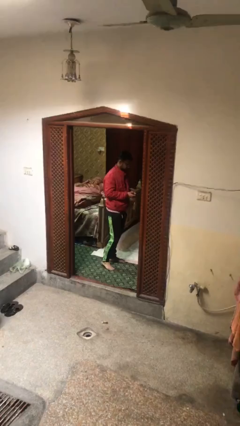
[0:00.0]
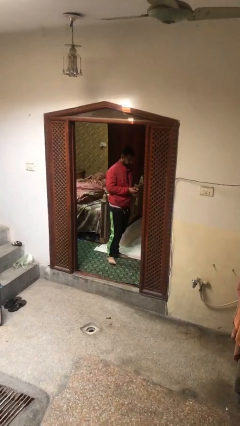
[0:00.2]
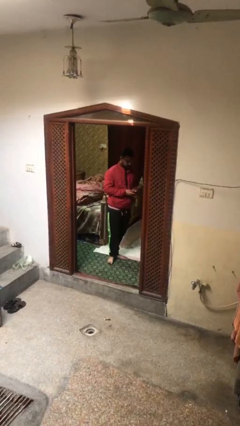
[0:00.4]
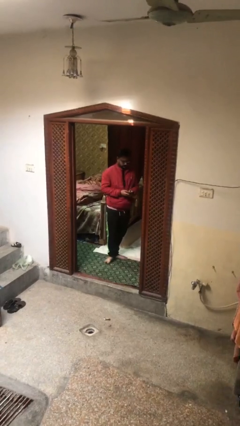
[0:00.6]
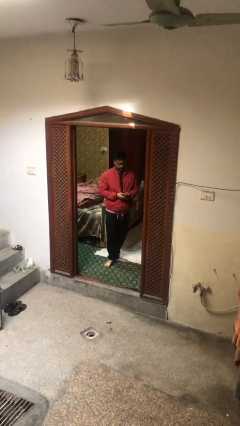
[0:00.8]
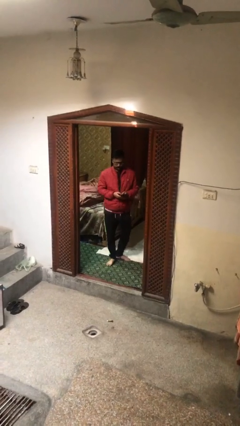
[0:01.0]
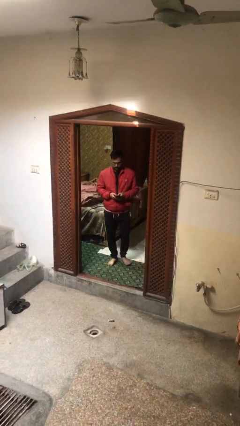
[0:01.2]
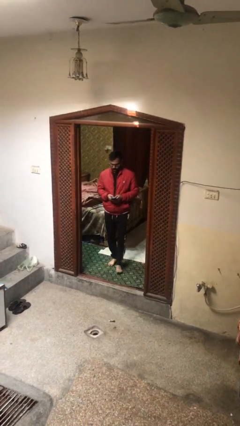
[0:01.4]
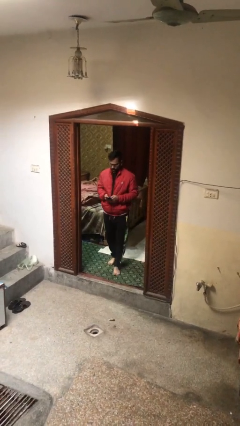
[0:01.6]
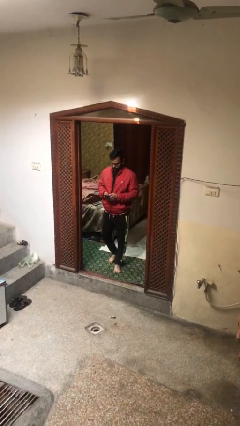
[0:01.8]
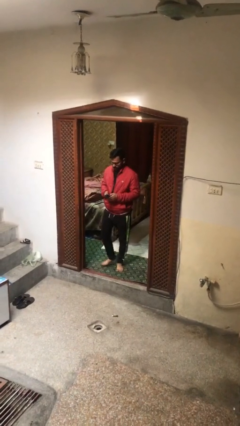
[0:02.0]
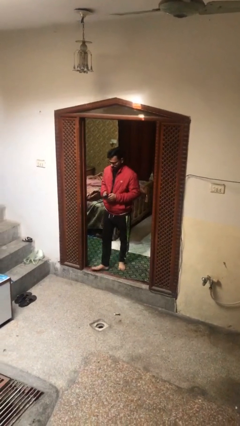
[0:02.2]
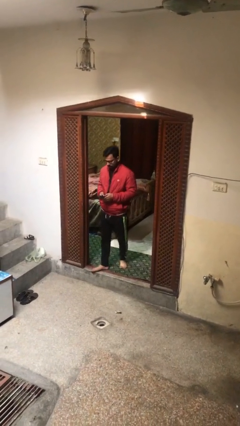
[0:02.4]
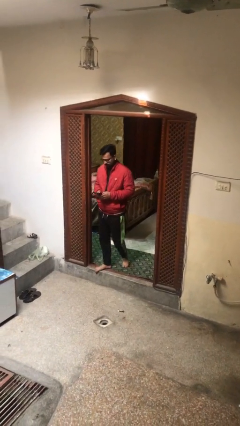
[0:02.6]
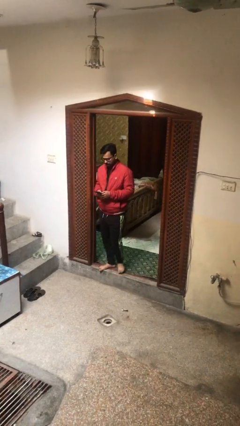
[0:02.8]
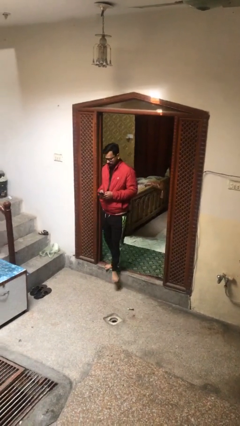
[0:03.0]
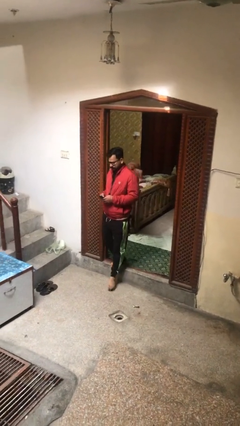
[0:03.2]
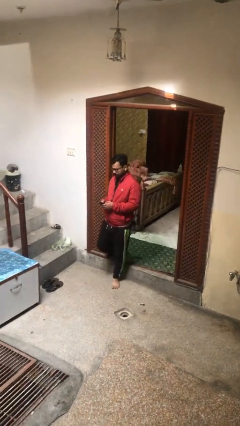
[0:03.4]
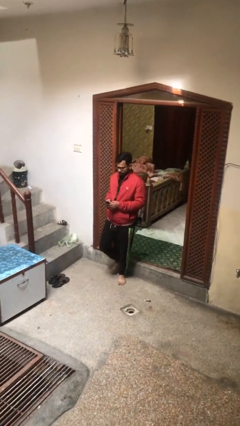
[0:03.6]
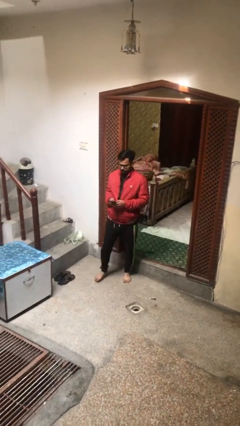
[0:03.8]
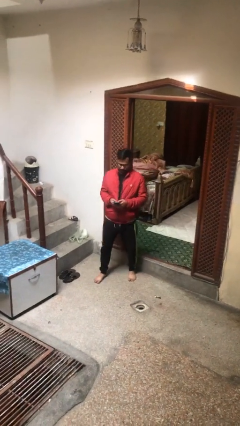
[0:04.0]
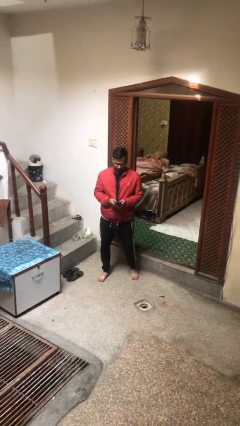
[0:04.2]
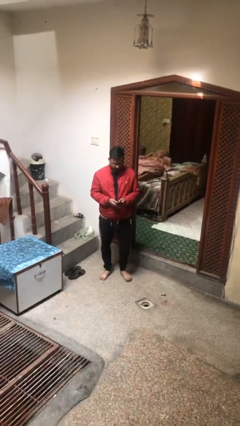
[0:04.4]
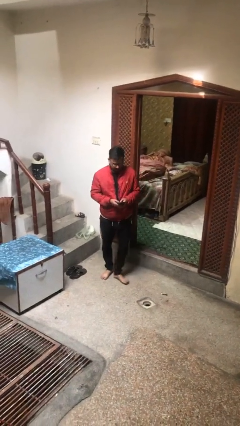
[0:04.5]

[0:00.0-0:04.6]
person enters scene through structure

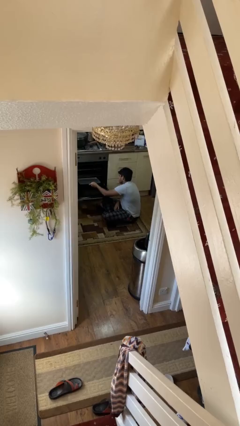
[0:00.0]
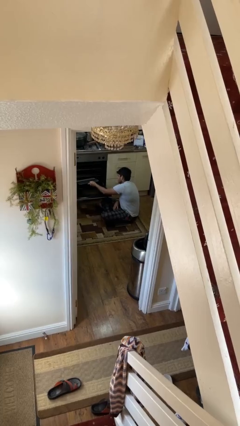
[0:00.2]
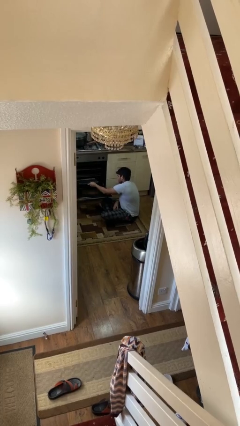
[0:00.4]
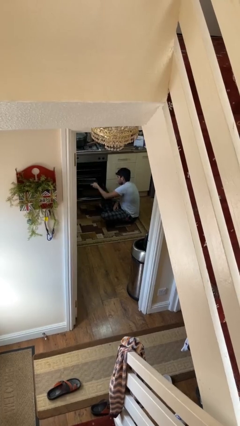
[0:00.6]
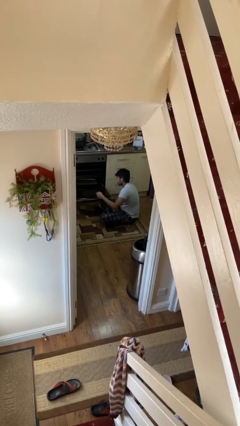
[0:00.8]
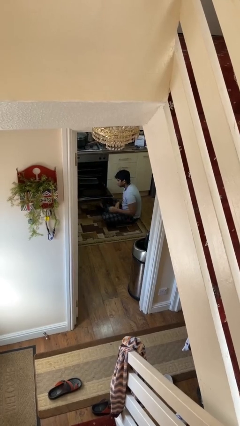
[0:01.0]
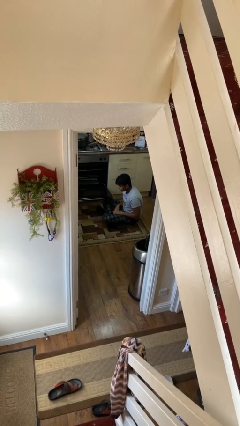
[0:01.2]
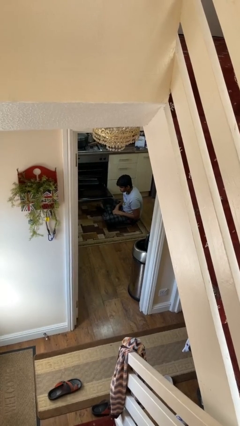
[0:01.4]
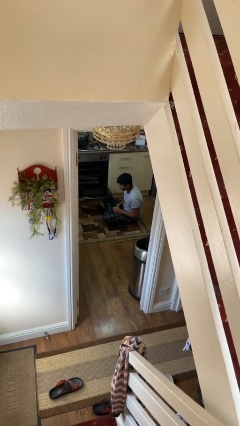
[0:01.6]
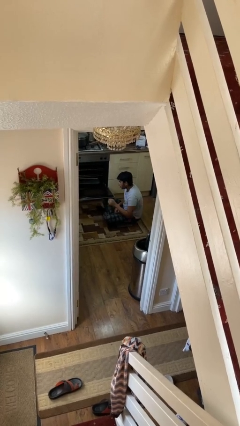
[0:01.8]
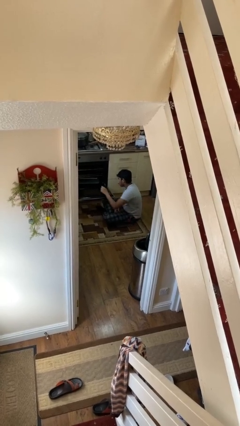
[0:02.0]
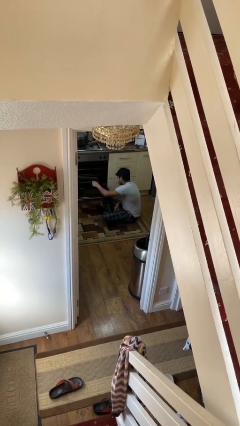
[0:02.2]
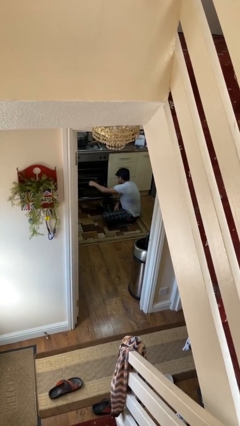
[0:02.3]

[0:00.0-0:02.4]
person puts object into oven

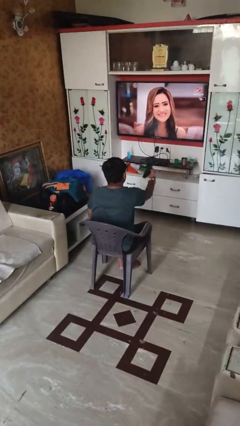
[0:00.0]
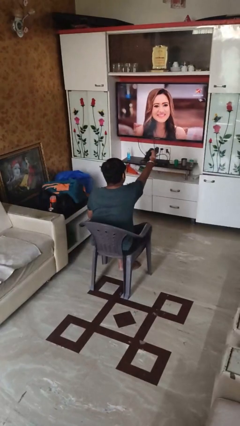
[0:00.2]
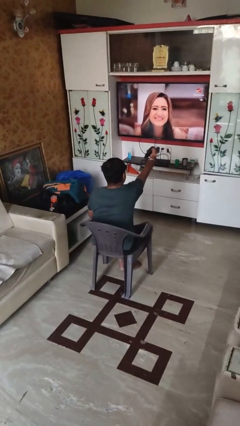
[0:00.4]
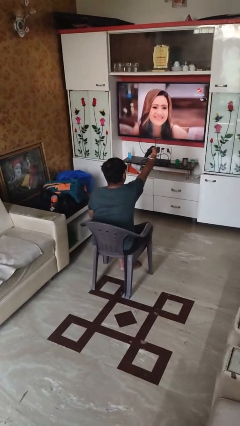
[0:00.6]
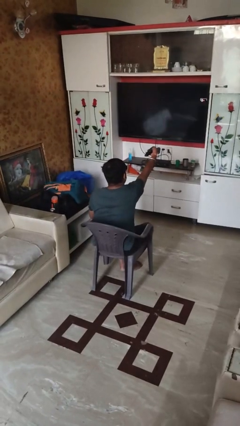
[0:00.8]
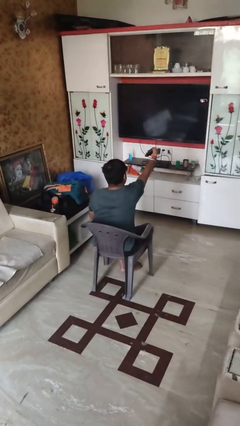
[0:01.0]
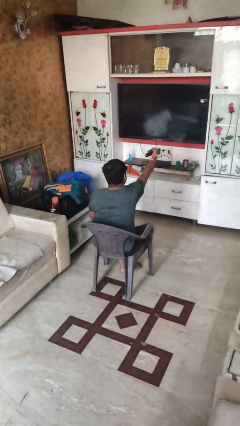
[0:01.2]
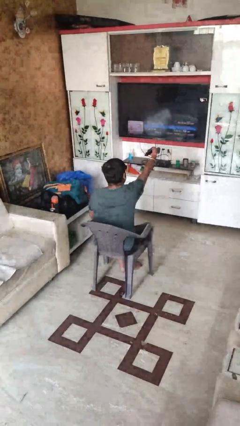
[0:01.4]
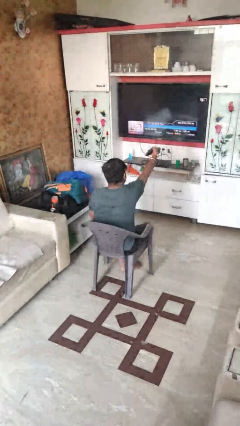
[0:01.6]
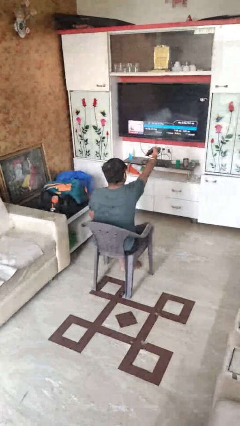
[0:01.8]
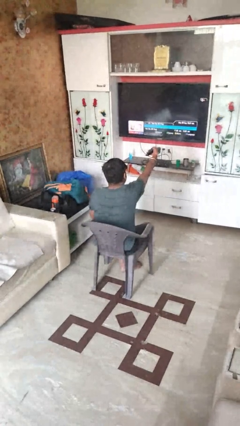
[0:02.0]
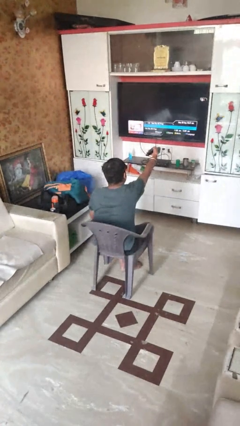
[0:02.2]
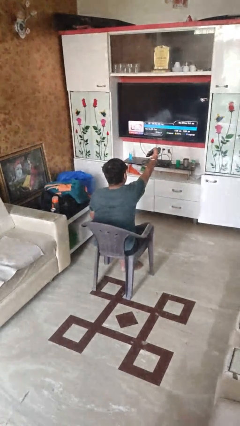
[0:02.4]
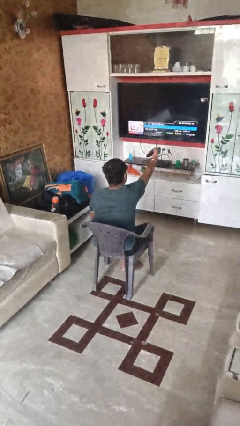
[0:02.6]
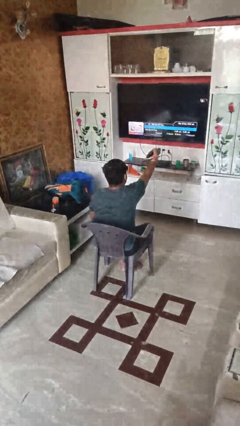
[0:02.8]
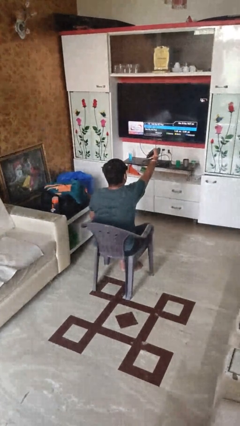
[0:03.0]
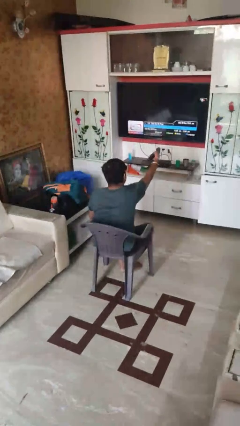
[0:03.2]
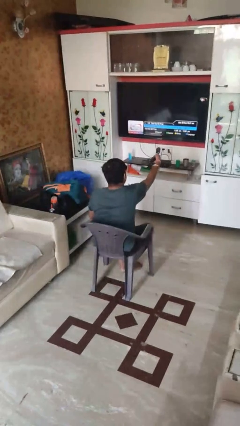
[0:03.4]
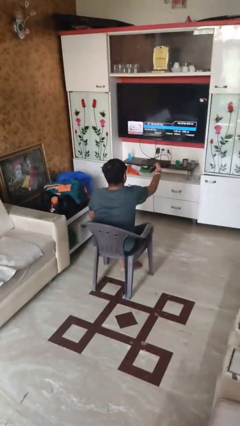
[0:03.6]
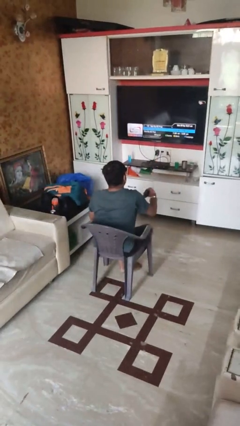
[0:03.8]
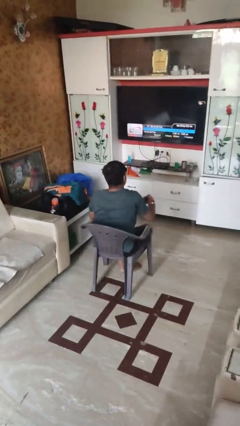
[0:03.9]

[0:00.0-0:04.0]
person uses television remote

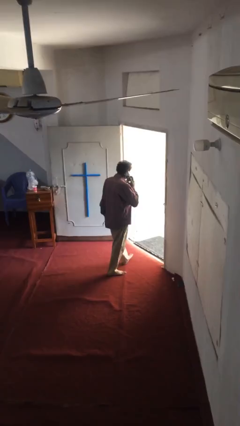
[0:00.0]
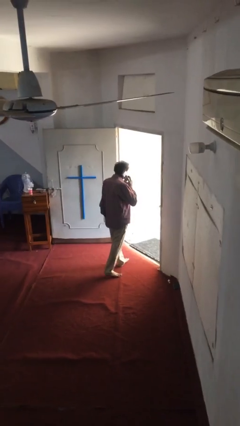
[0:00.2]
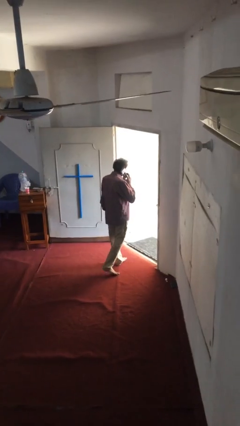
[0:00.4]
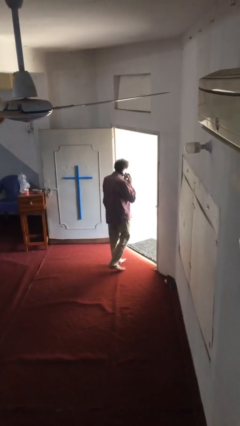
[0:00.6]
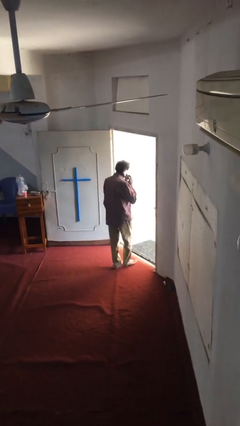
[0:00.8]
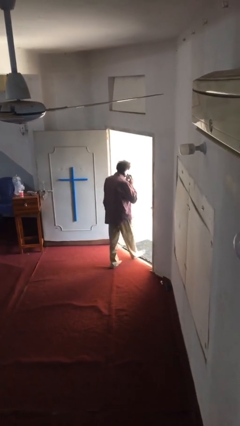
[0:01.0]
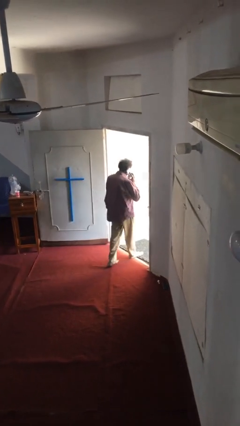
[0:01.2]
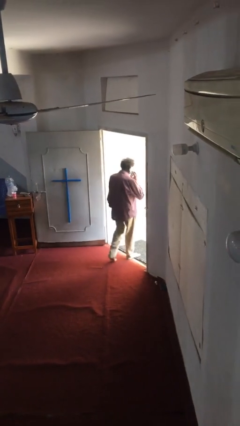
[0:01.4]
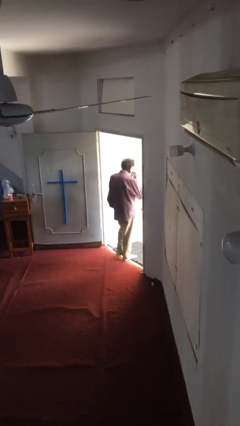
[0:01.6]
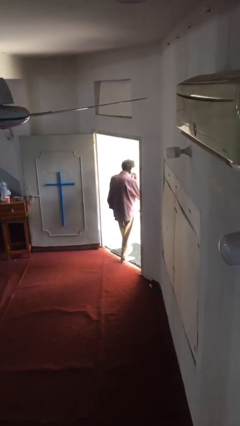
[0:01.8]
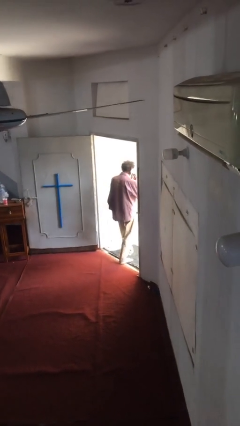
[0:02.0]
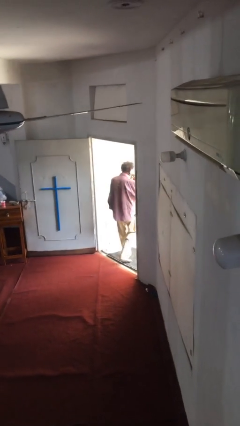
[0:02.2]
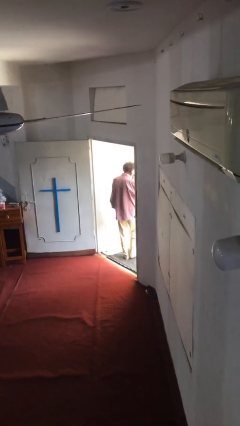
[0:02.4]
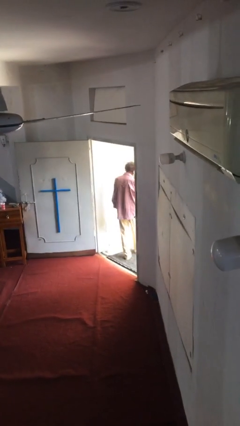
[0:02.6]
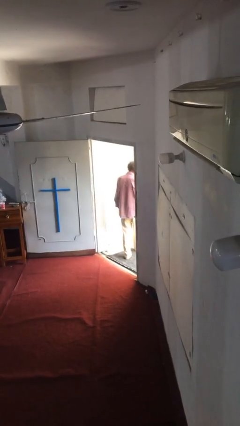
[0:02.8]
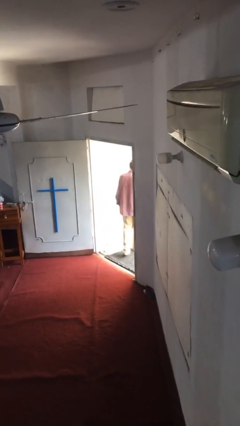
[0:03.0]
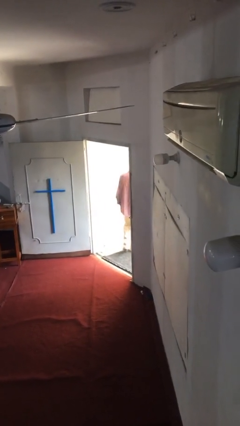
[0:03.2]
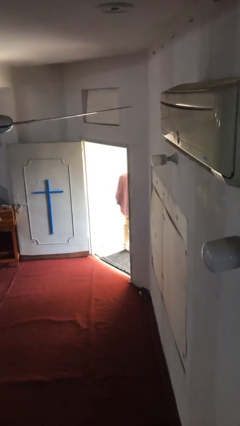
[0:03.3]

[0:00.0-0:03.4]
person exits scene through structure

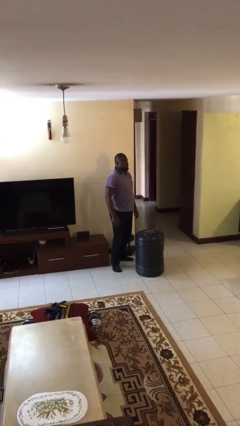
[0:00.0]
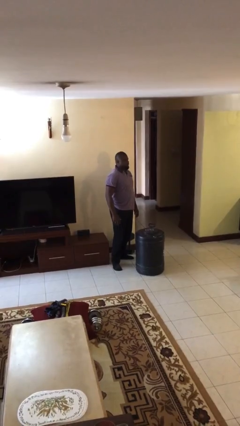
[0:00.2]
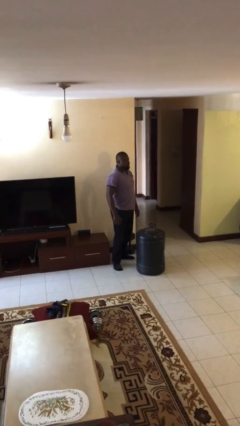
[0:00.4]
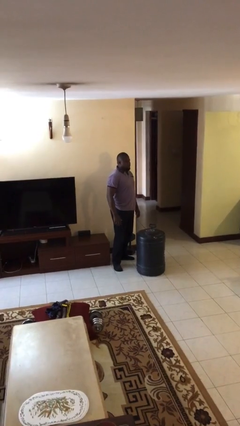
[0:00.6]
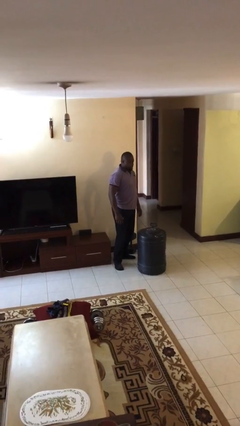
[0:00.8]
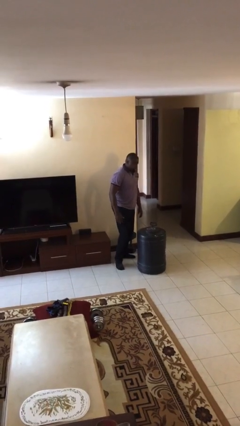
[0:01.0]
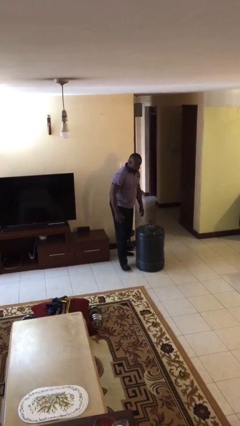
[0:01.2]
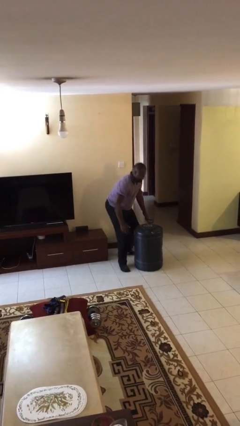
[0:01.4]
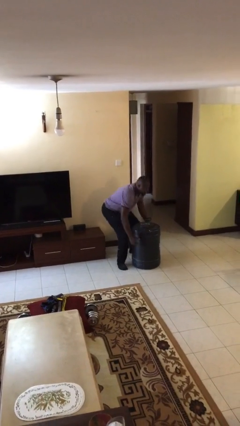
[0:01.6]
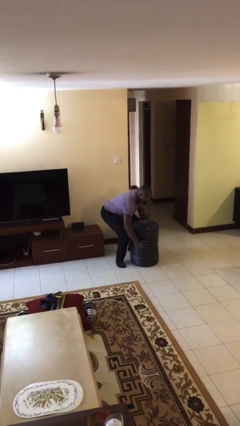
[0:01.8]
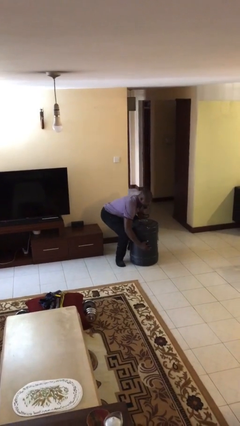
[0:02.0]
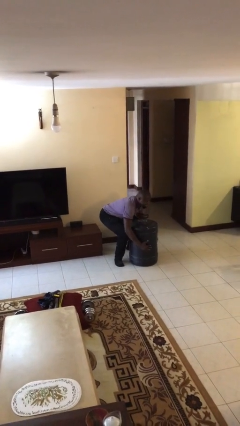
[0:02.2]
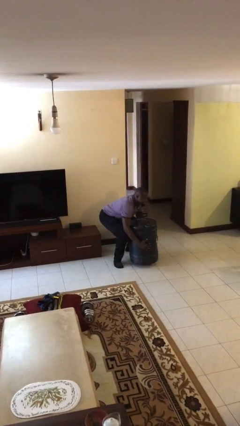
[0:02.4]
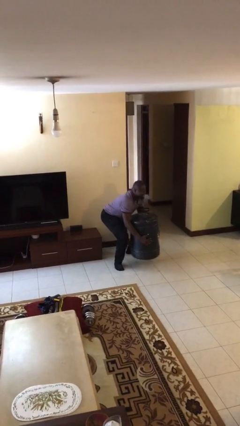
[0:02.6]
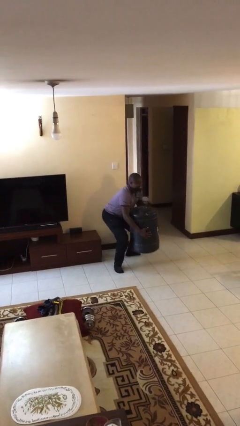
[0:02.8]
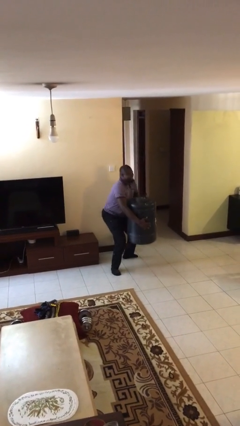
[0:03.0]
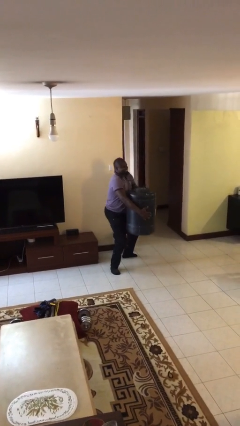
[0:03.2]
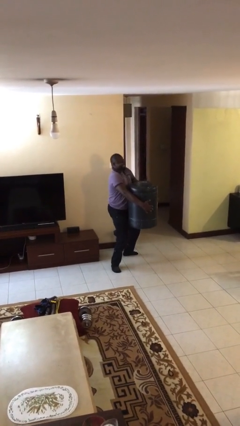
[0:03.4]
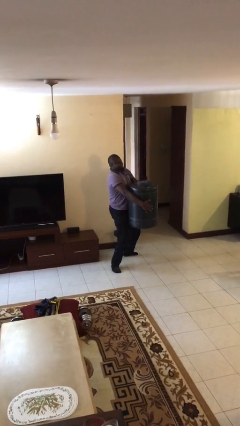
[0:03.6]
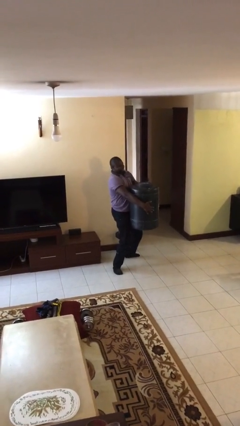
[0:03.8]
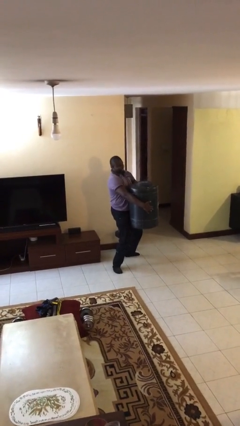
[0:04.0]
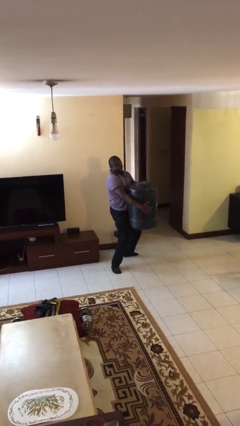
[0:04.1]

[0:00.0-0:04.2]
person picks up object from floor
